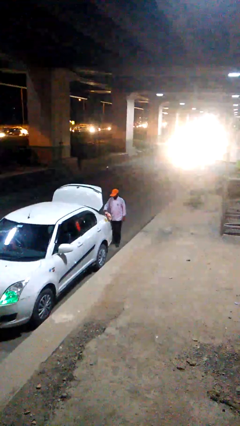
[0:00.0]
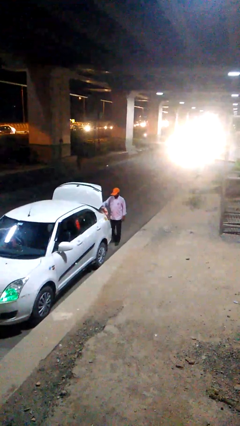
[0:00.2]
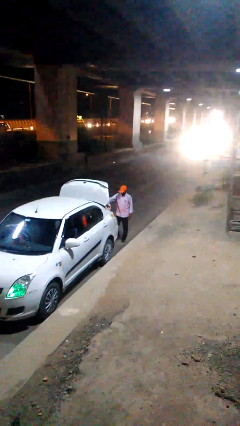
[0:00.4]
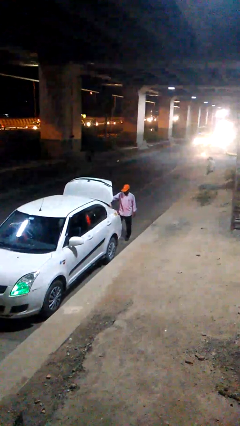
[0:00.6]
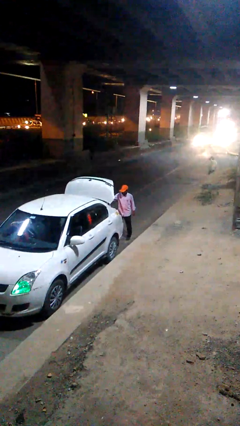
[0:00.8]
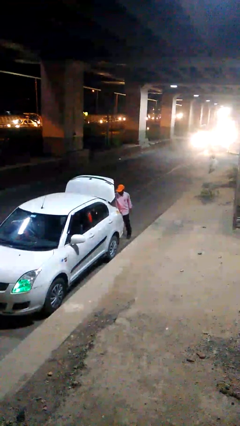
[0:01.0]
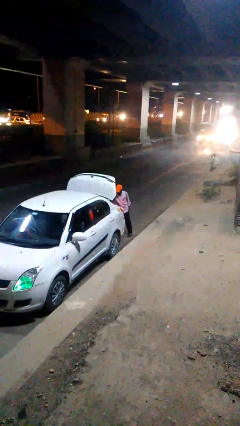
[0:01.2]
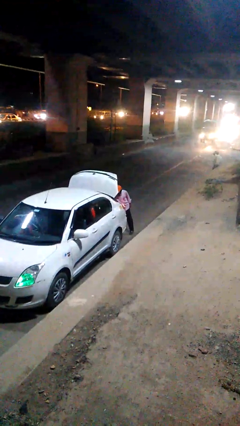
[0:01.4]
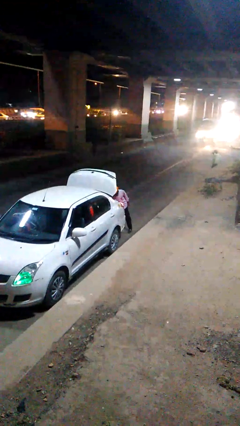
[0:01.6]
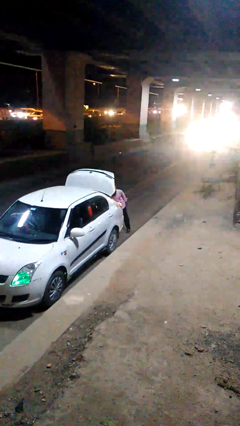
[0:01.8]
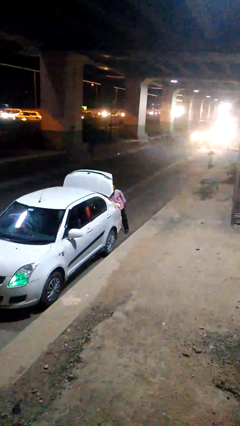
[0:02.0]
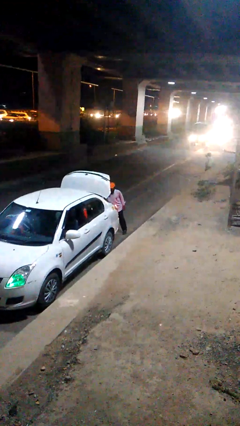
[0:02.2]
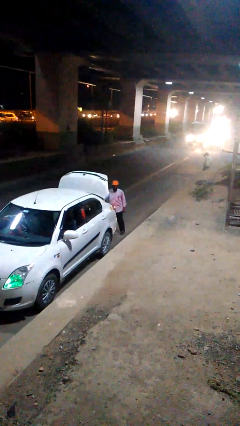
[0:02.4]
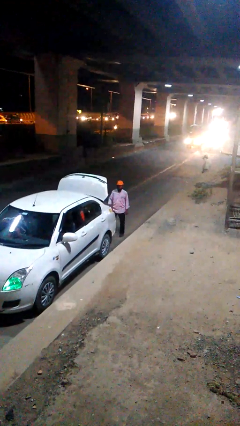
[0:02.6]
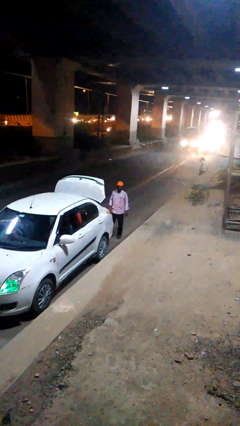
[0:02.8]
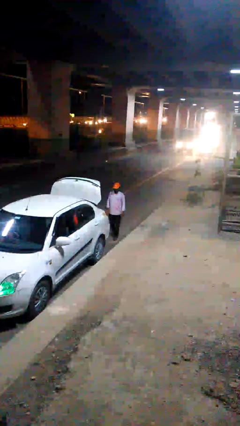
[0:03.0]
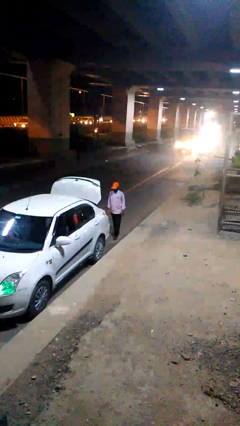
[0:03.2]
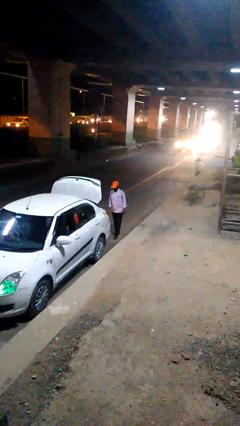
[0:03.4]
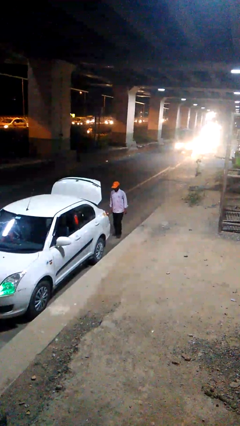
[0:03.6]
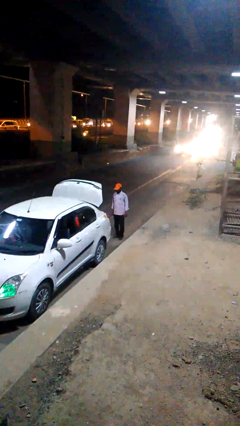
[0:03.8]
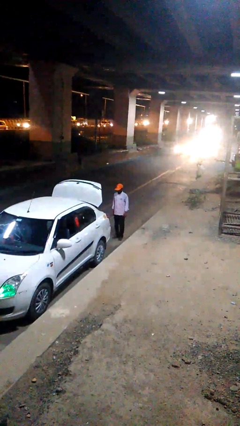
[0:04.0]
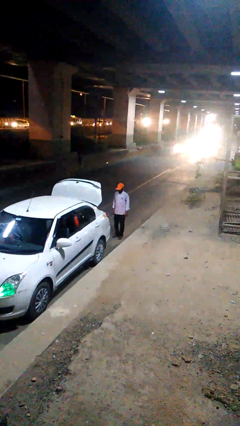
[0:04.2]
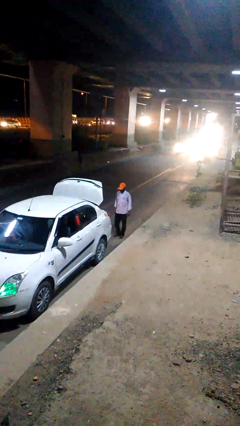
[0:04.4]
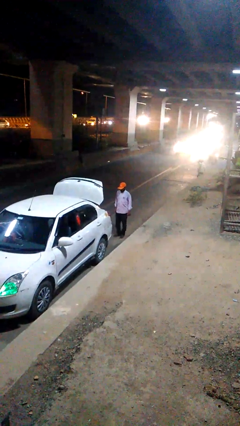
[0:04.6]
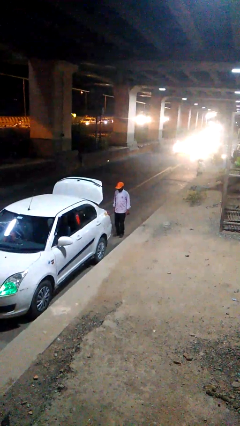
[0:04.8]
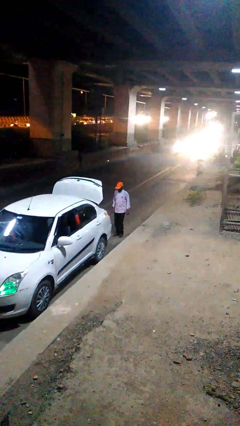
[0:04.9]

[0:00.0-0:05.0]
person loads car

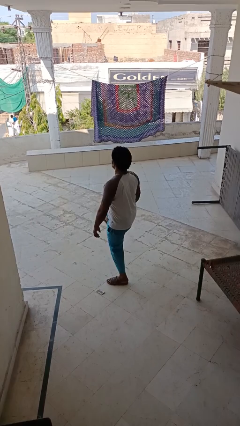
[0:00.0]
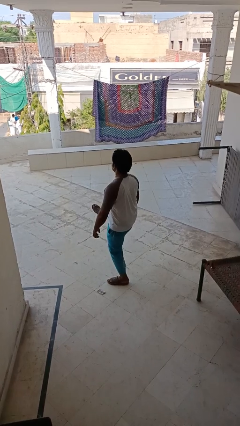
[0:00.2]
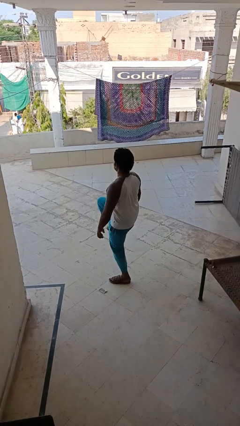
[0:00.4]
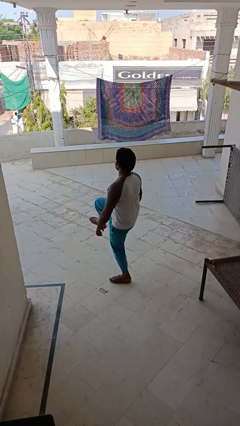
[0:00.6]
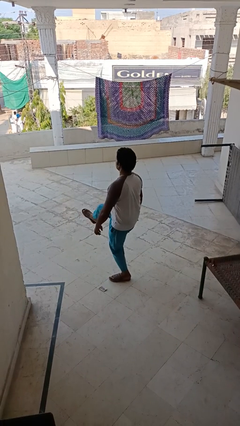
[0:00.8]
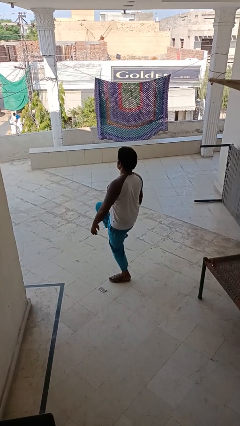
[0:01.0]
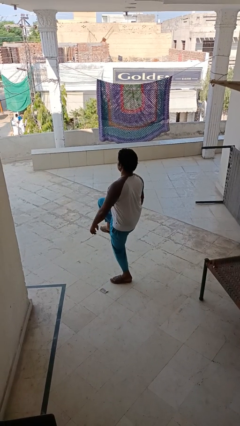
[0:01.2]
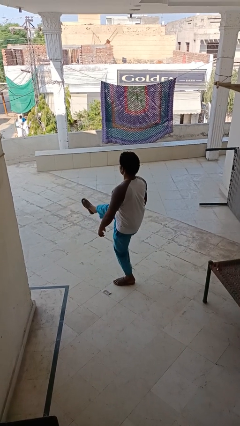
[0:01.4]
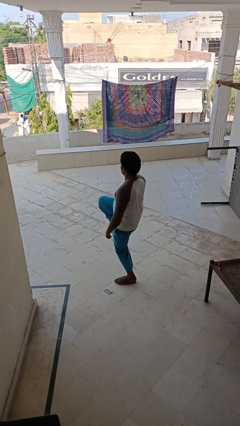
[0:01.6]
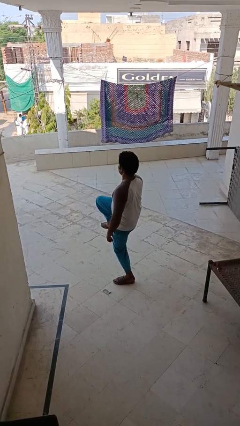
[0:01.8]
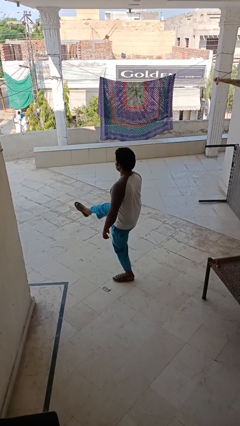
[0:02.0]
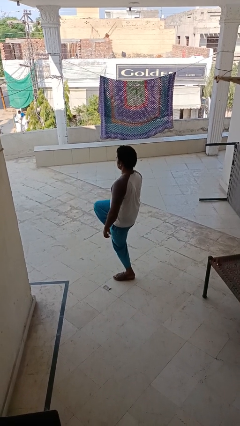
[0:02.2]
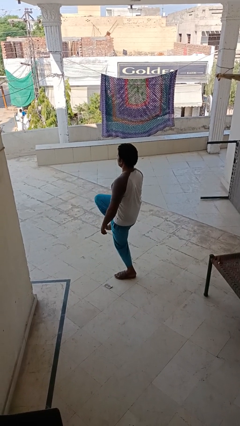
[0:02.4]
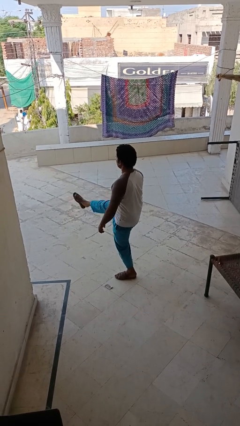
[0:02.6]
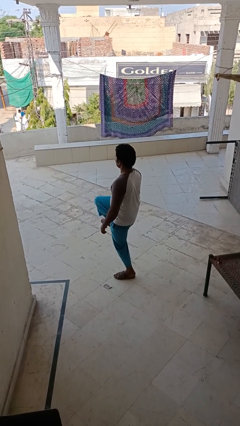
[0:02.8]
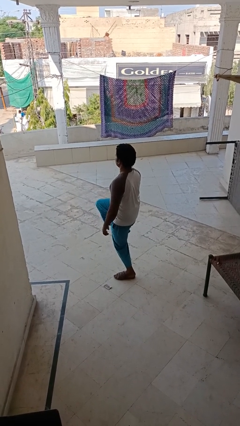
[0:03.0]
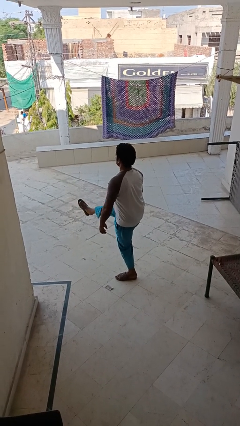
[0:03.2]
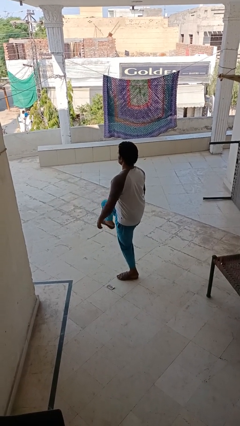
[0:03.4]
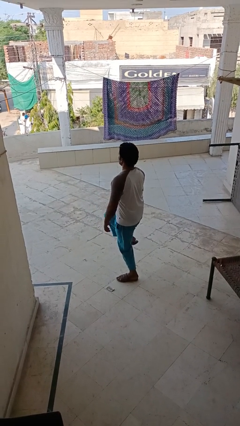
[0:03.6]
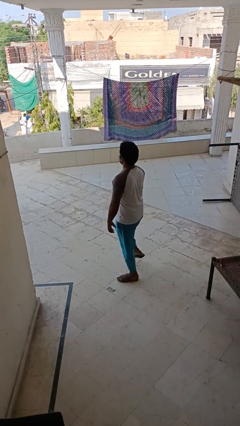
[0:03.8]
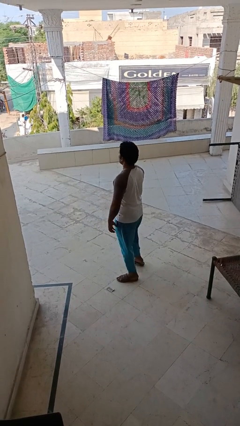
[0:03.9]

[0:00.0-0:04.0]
person karate kicks

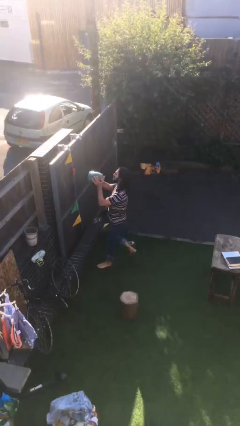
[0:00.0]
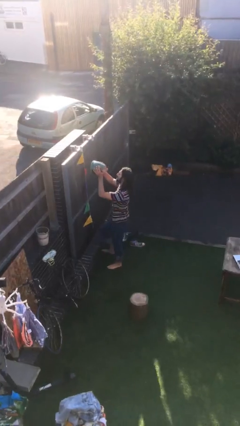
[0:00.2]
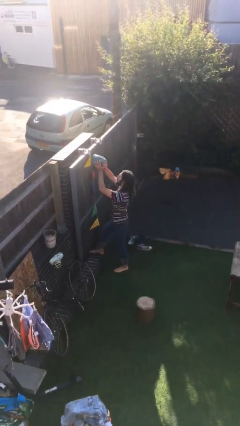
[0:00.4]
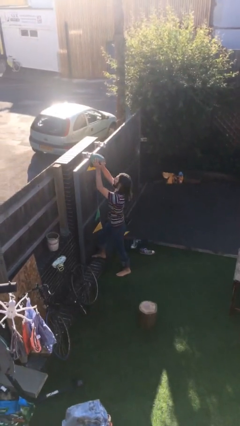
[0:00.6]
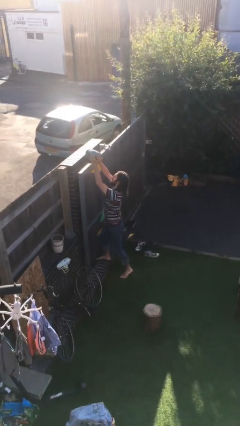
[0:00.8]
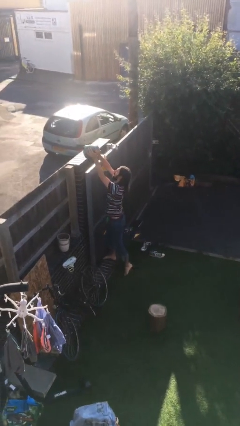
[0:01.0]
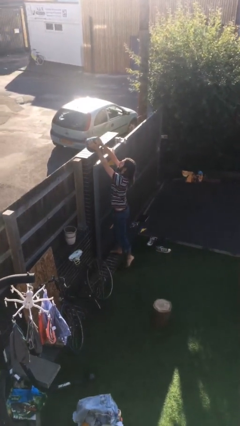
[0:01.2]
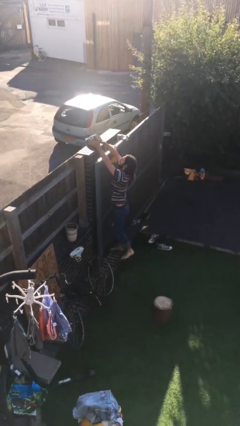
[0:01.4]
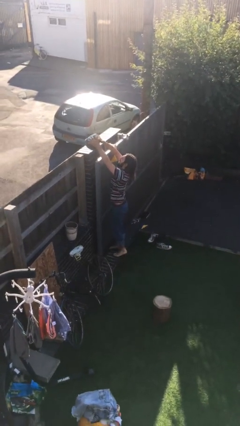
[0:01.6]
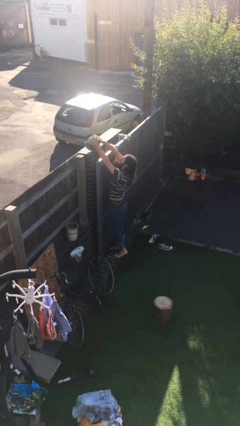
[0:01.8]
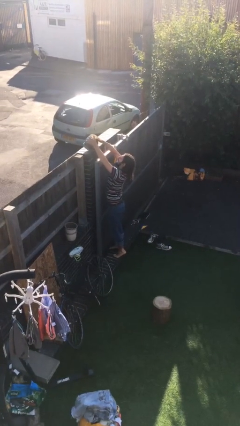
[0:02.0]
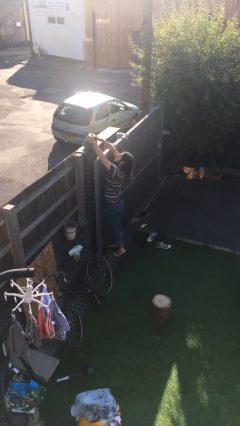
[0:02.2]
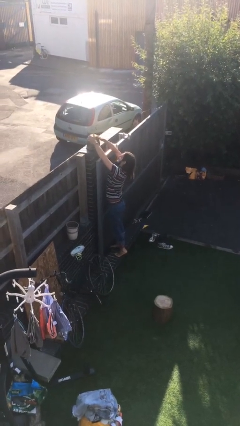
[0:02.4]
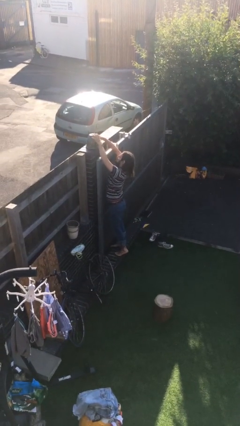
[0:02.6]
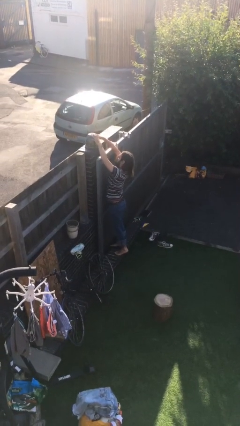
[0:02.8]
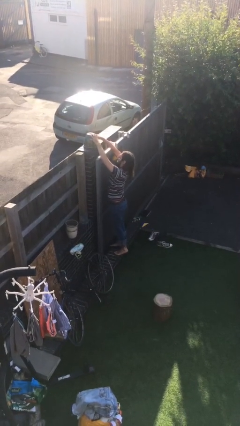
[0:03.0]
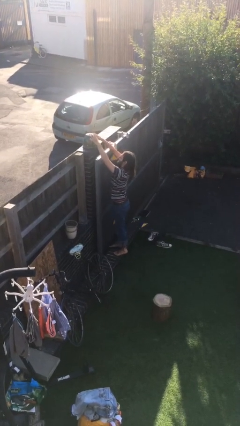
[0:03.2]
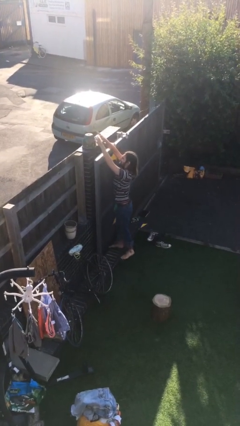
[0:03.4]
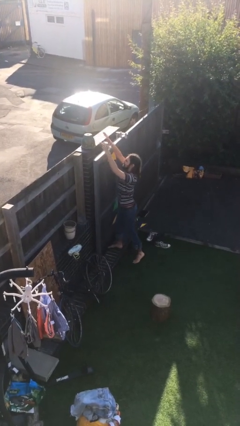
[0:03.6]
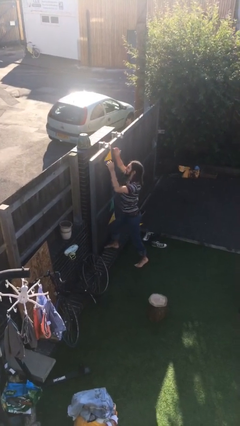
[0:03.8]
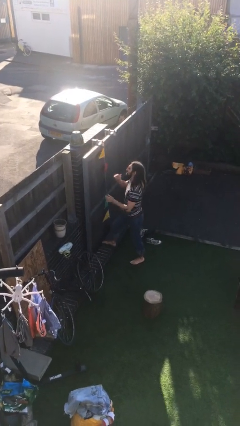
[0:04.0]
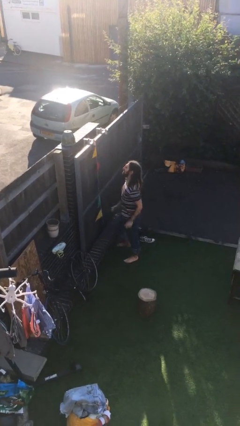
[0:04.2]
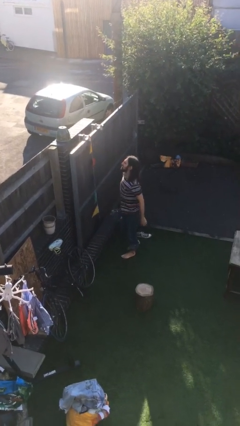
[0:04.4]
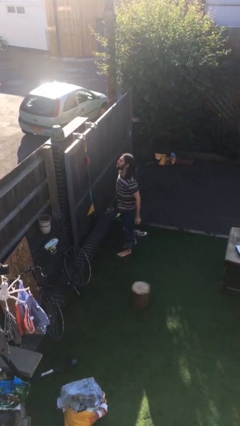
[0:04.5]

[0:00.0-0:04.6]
person puts down object on shelf

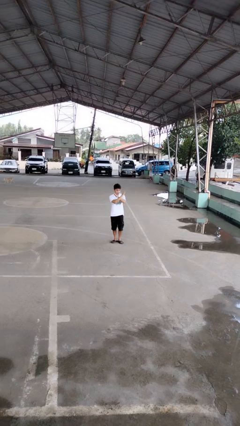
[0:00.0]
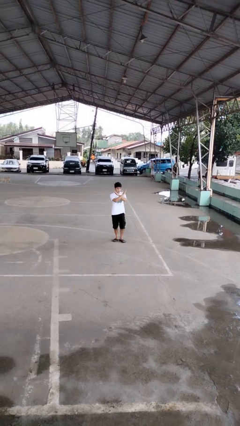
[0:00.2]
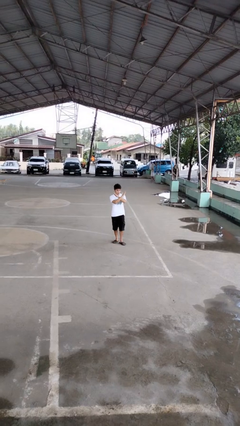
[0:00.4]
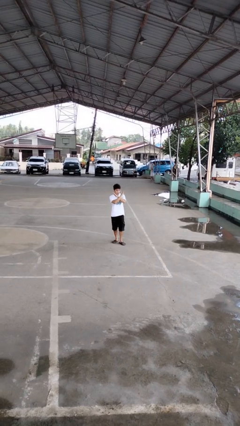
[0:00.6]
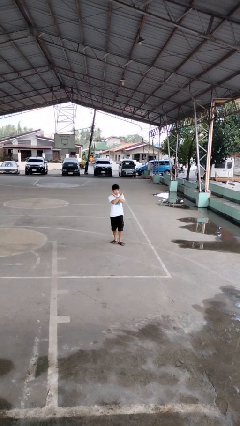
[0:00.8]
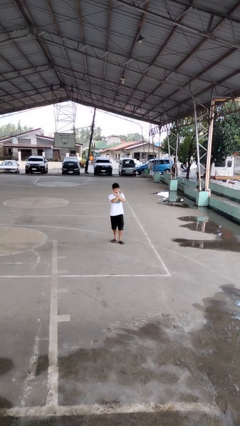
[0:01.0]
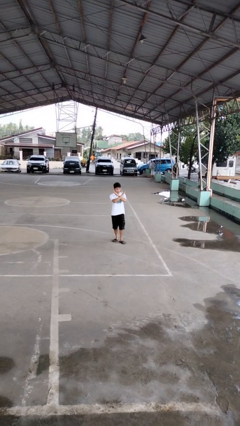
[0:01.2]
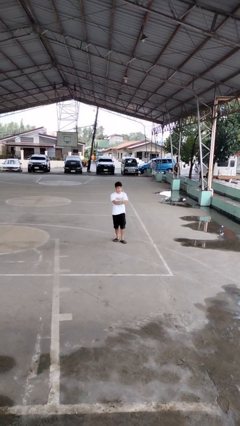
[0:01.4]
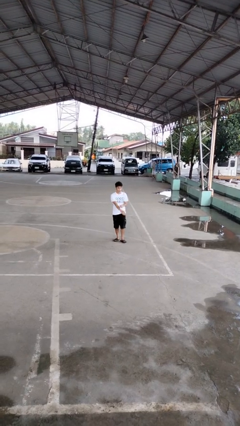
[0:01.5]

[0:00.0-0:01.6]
person gestures arms x

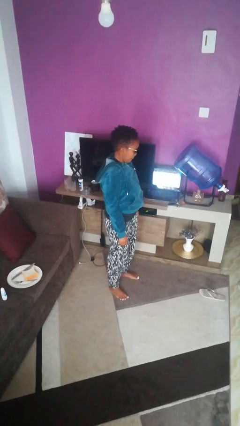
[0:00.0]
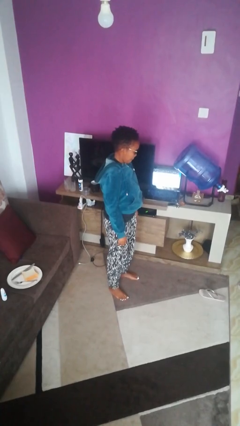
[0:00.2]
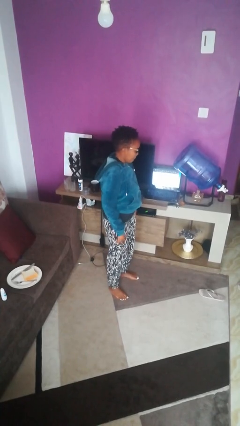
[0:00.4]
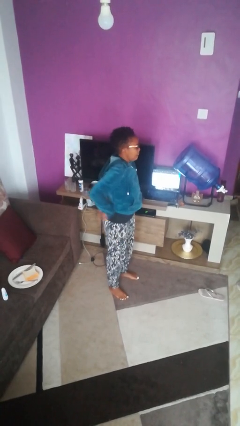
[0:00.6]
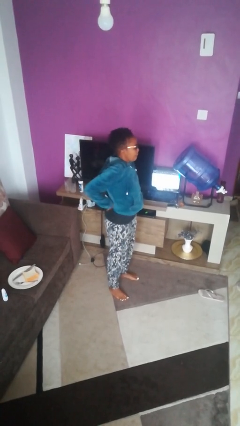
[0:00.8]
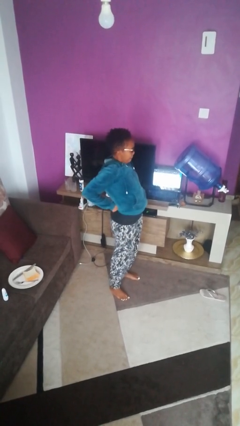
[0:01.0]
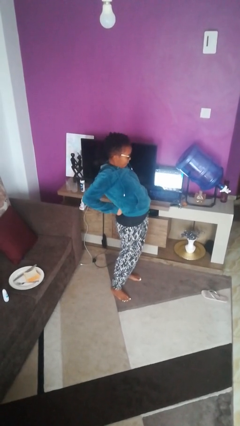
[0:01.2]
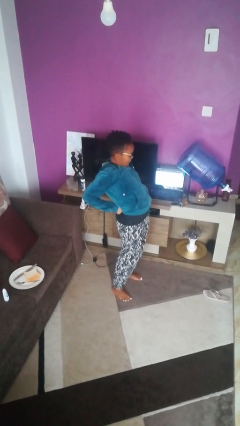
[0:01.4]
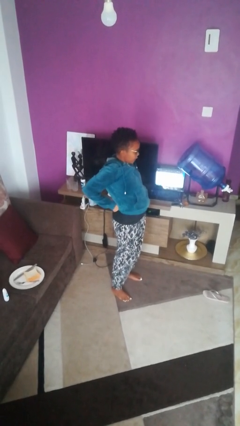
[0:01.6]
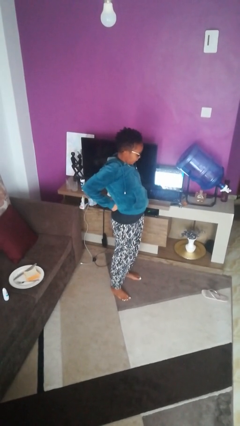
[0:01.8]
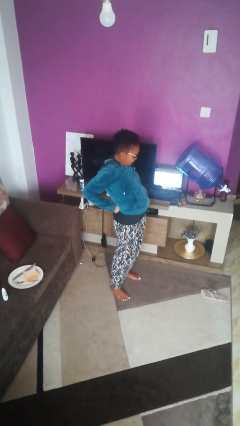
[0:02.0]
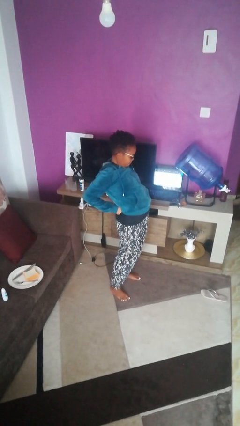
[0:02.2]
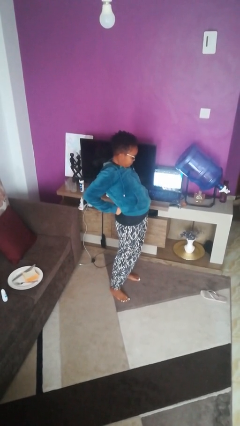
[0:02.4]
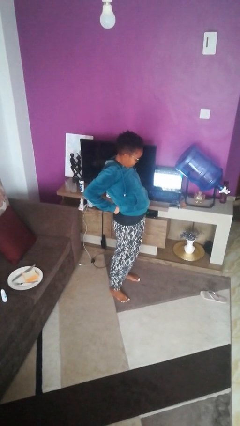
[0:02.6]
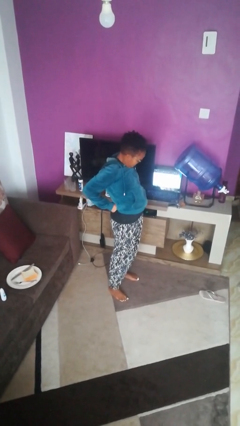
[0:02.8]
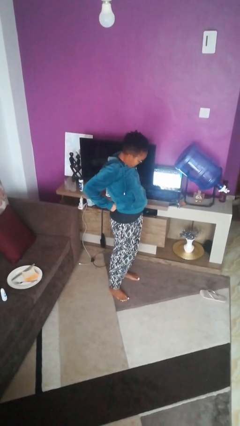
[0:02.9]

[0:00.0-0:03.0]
person stretches back
